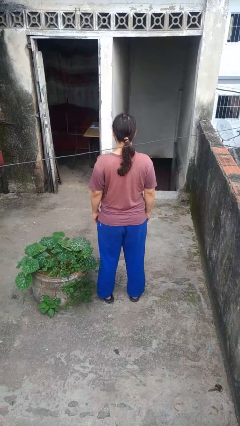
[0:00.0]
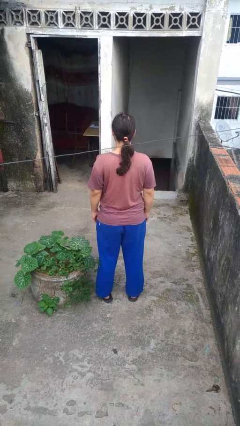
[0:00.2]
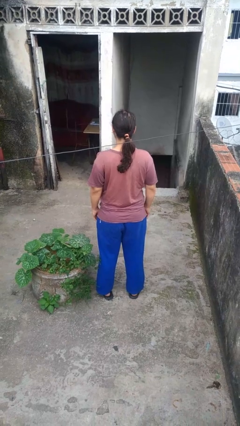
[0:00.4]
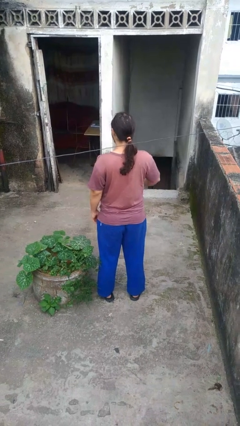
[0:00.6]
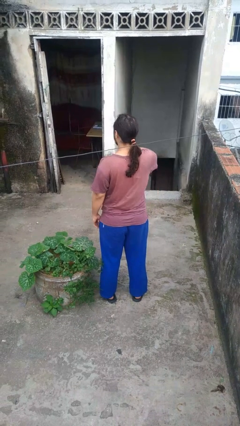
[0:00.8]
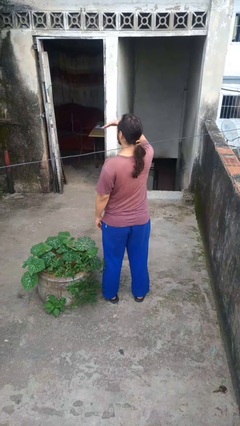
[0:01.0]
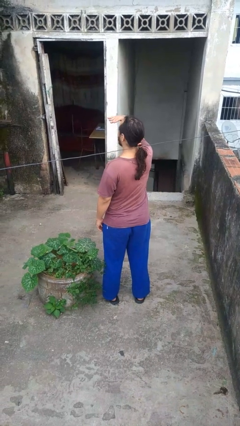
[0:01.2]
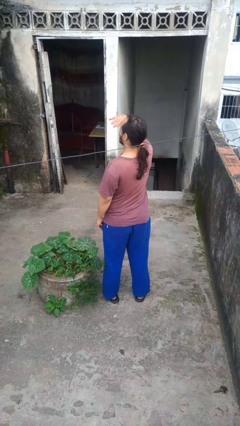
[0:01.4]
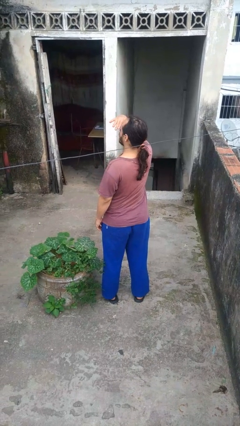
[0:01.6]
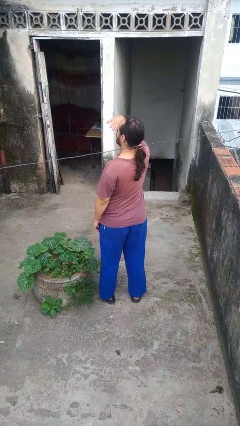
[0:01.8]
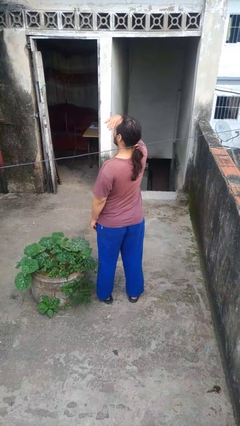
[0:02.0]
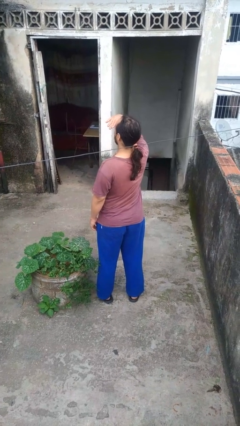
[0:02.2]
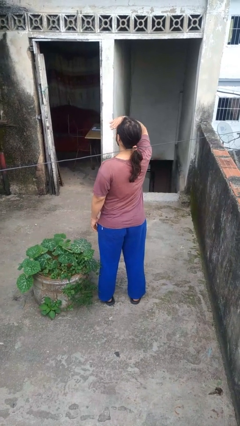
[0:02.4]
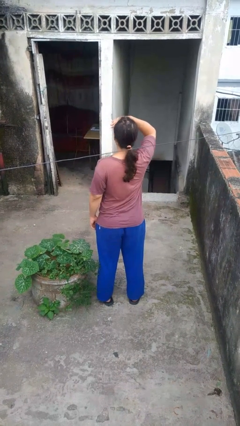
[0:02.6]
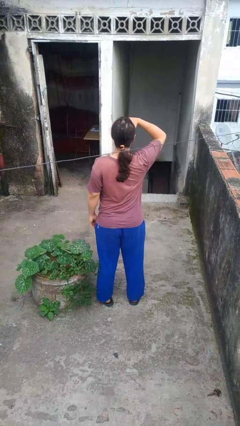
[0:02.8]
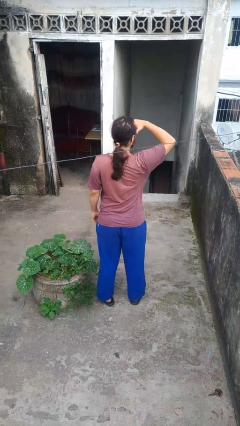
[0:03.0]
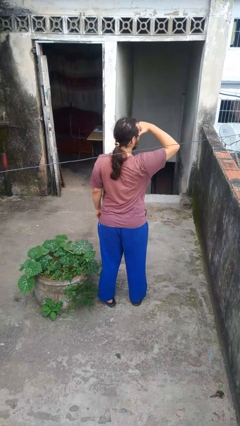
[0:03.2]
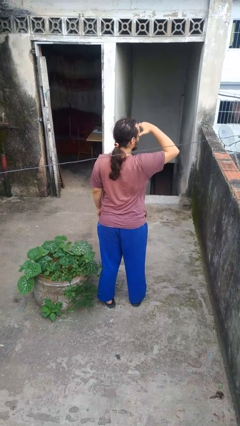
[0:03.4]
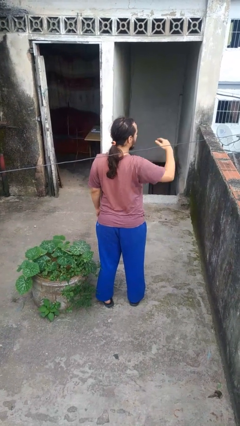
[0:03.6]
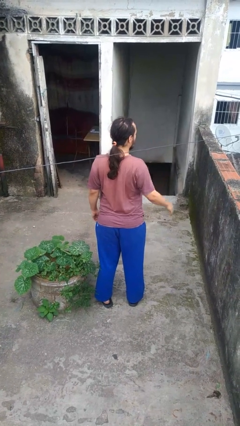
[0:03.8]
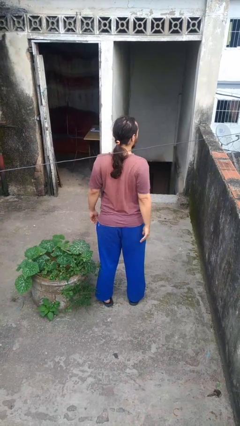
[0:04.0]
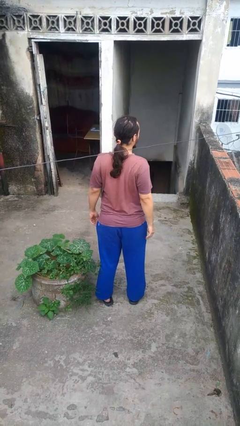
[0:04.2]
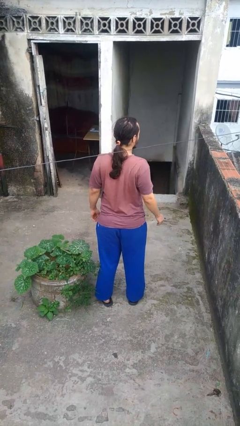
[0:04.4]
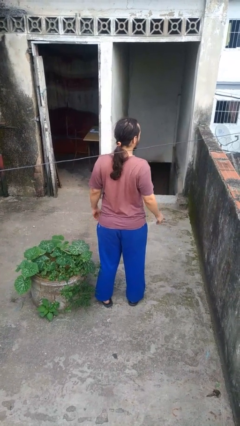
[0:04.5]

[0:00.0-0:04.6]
person shades eyes

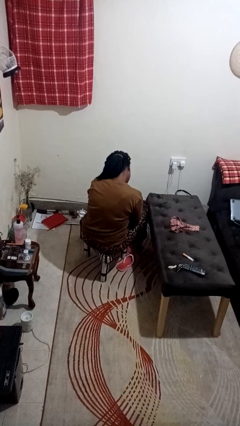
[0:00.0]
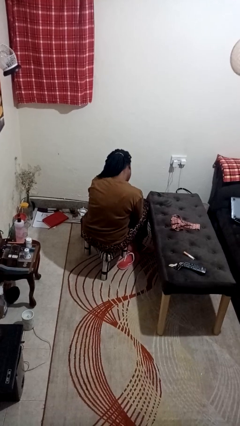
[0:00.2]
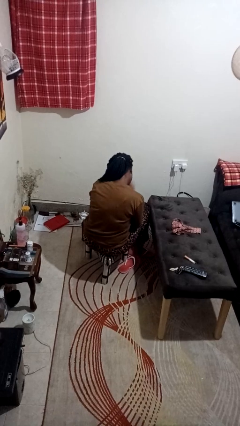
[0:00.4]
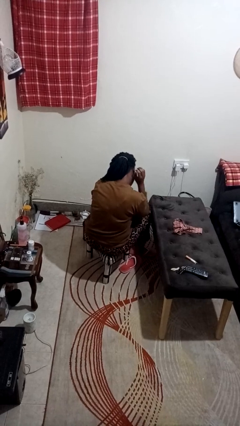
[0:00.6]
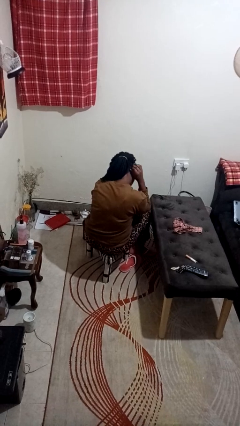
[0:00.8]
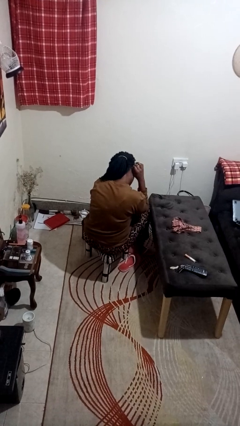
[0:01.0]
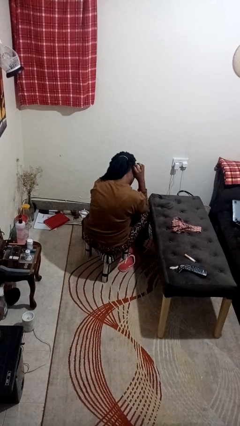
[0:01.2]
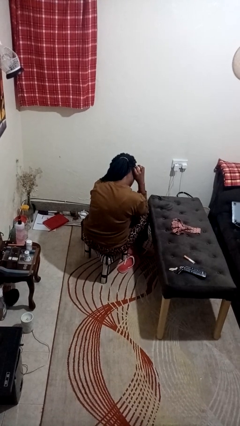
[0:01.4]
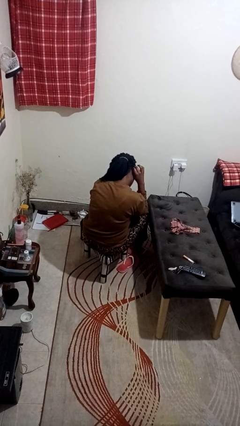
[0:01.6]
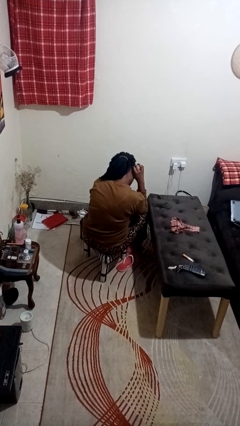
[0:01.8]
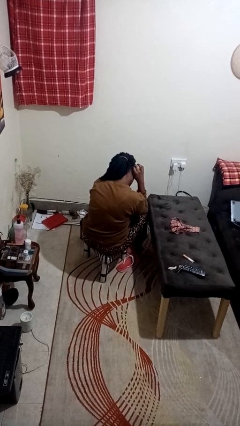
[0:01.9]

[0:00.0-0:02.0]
person gestures listen closely

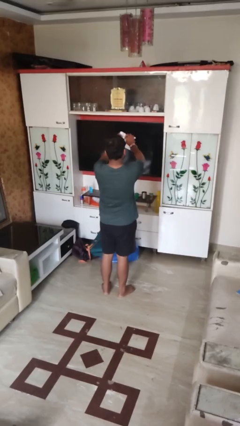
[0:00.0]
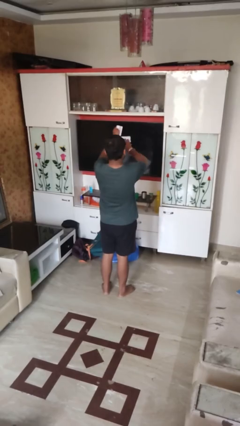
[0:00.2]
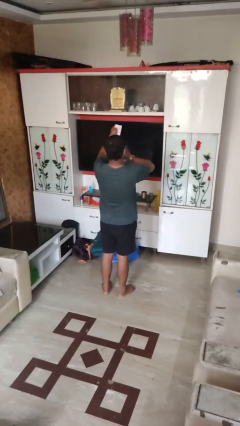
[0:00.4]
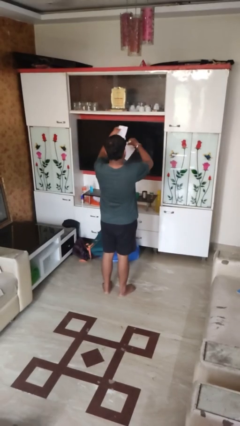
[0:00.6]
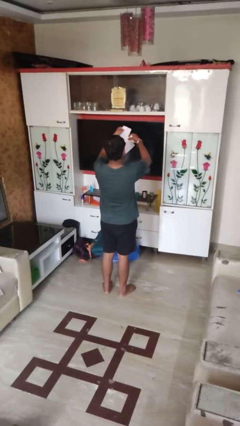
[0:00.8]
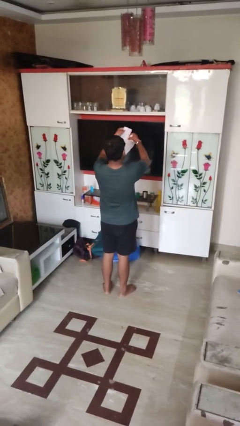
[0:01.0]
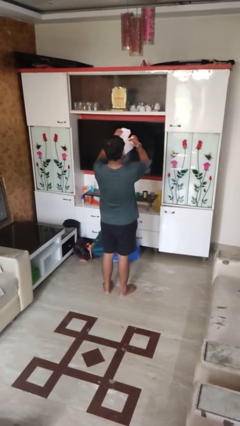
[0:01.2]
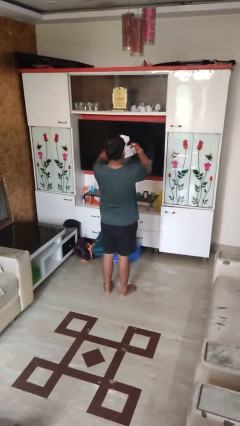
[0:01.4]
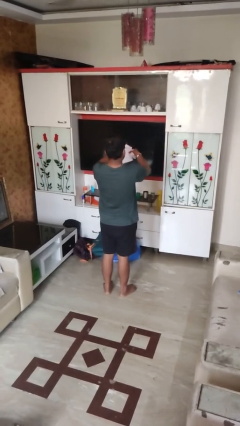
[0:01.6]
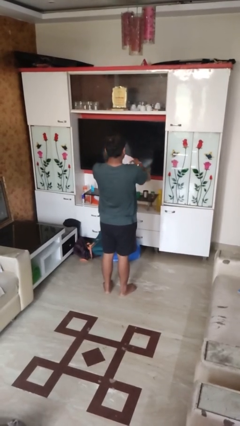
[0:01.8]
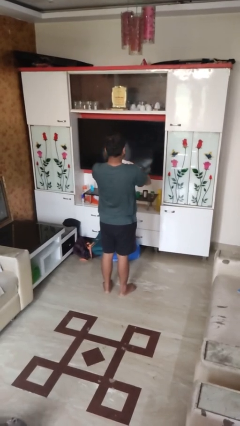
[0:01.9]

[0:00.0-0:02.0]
person tears paper

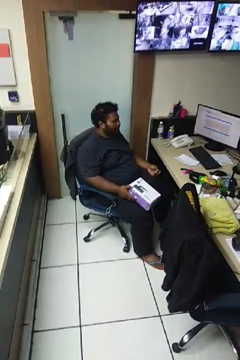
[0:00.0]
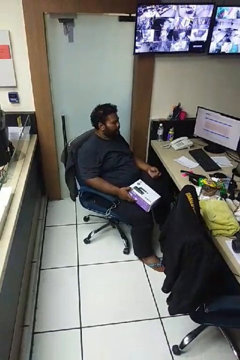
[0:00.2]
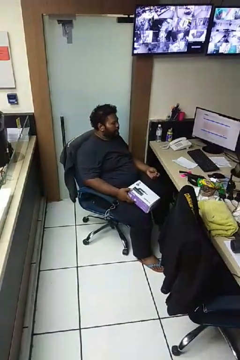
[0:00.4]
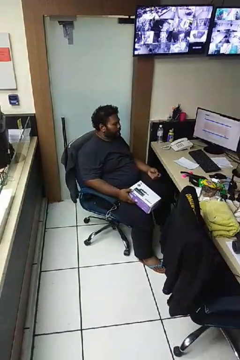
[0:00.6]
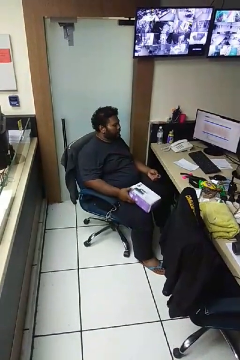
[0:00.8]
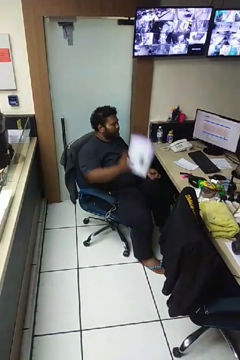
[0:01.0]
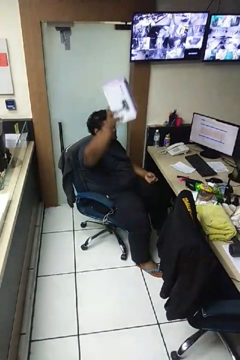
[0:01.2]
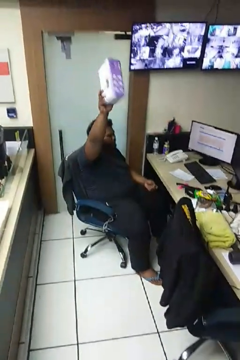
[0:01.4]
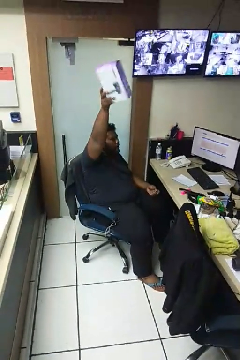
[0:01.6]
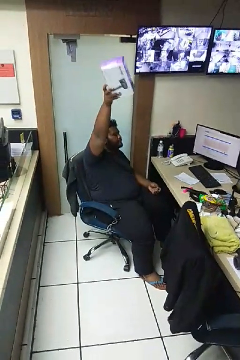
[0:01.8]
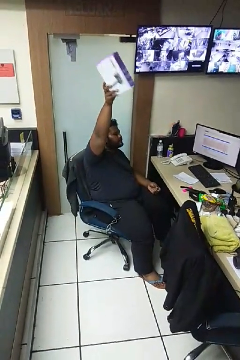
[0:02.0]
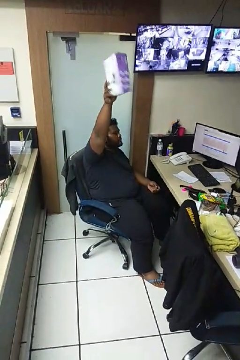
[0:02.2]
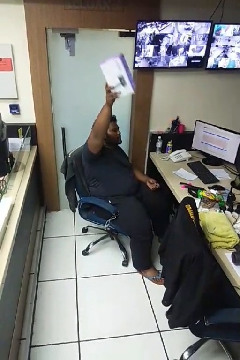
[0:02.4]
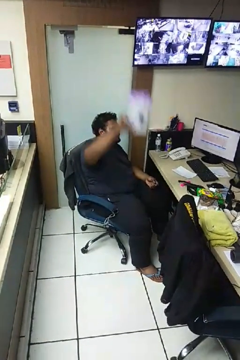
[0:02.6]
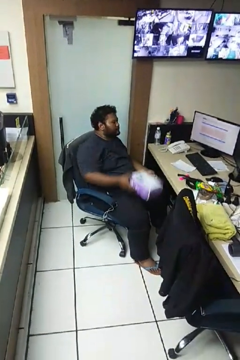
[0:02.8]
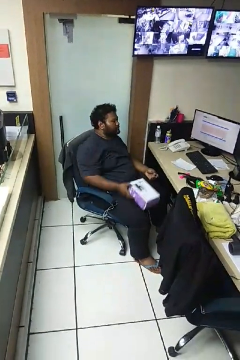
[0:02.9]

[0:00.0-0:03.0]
person holds object above head

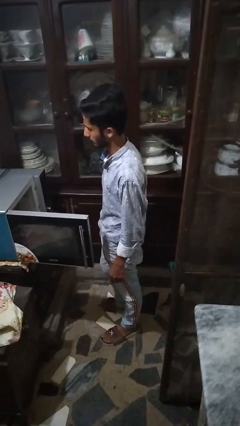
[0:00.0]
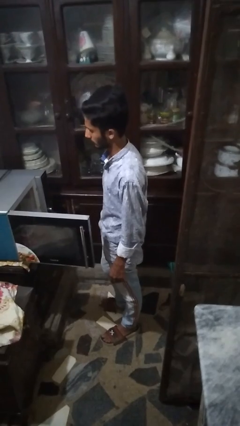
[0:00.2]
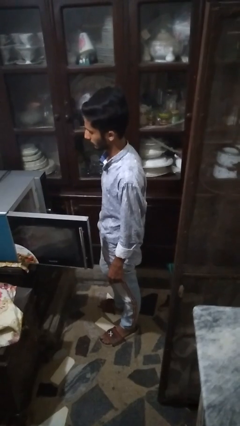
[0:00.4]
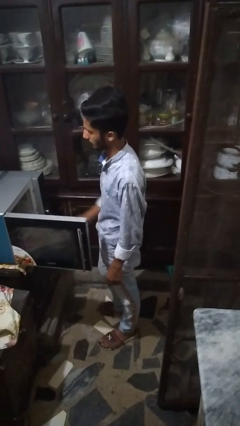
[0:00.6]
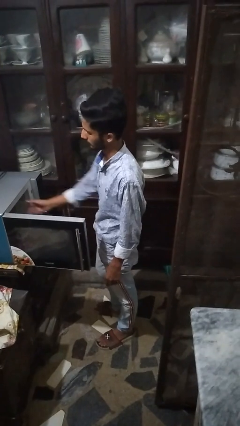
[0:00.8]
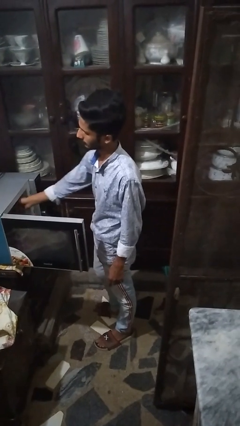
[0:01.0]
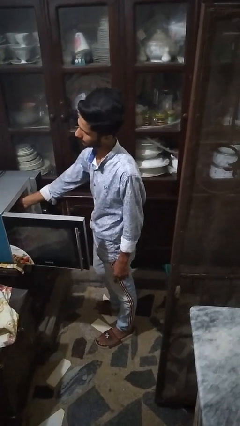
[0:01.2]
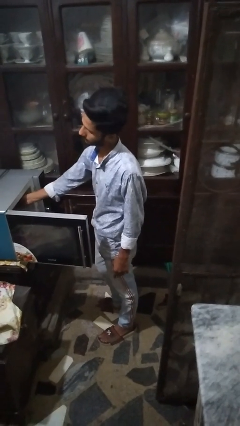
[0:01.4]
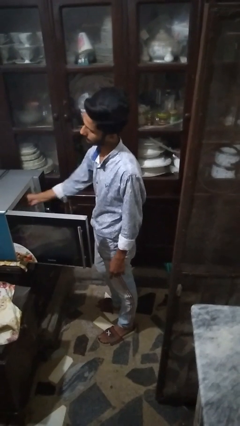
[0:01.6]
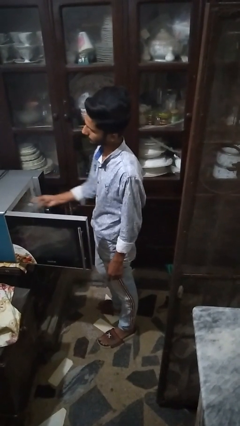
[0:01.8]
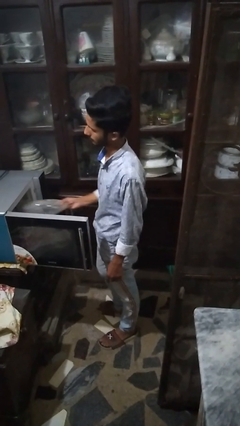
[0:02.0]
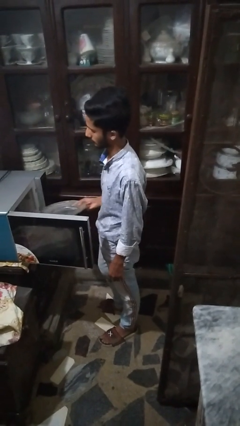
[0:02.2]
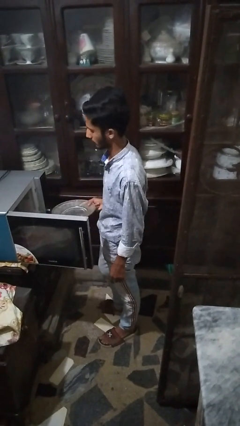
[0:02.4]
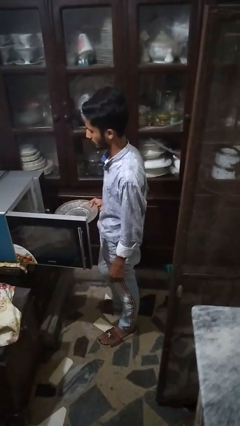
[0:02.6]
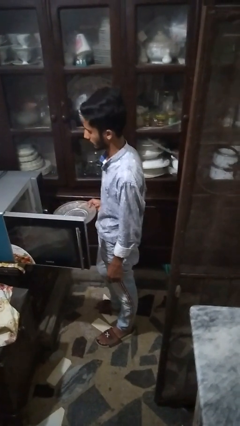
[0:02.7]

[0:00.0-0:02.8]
person takes object from microwave

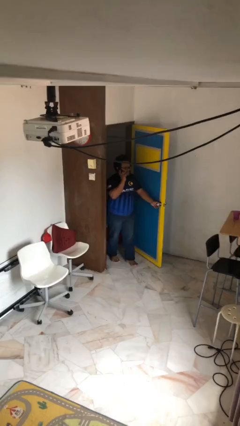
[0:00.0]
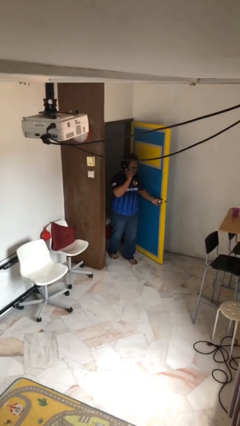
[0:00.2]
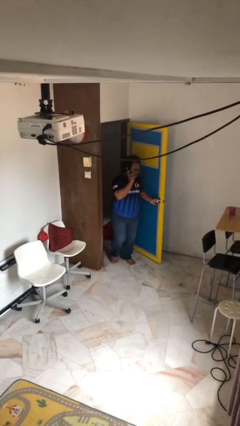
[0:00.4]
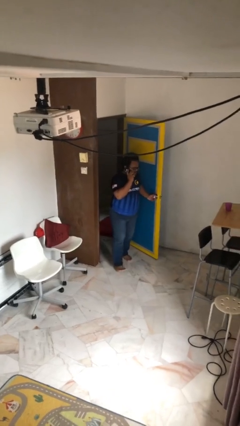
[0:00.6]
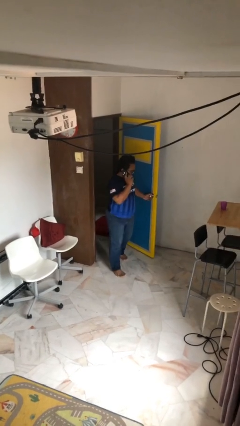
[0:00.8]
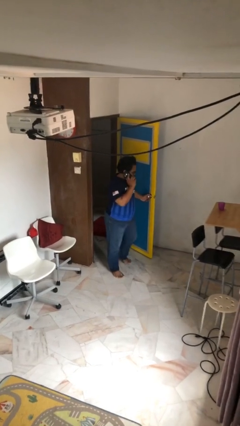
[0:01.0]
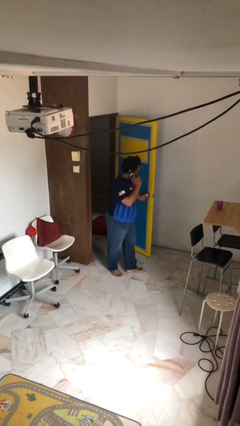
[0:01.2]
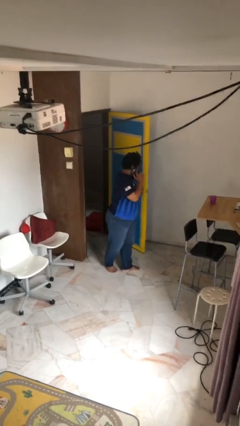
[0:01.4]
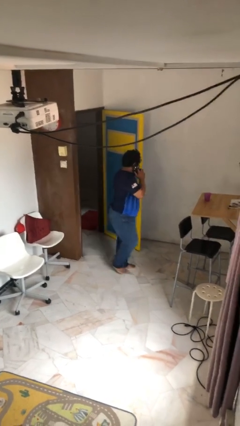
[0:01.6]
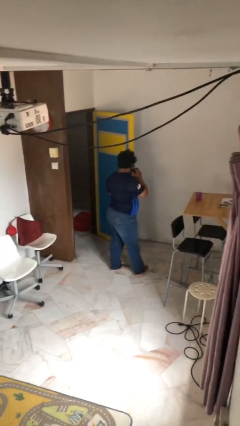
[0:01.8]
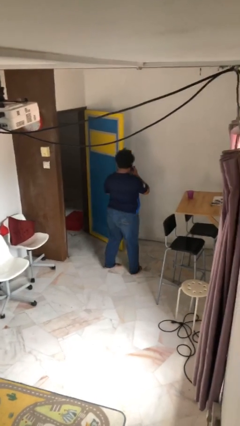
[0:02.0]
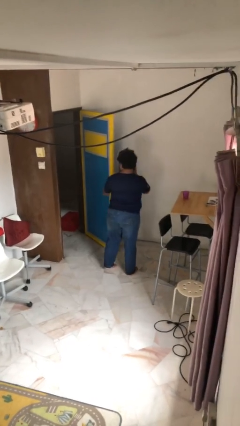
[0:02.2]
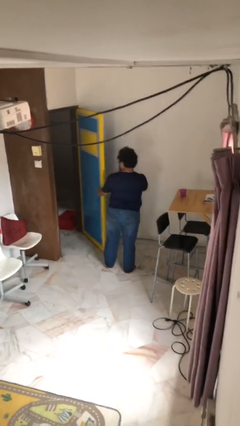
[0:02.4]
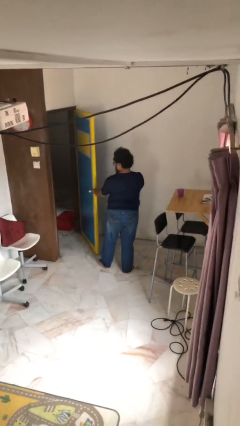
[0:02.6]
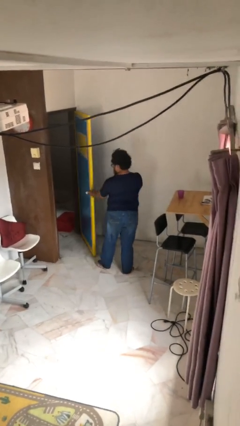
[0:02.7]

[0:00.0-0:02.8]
person enters scene through structure

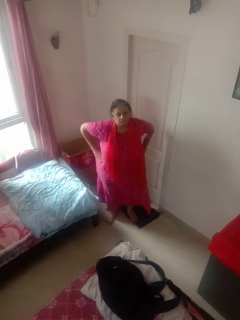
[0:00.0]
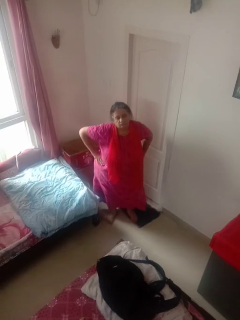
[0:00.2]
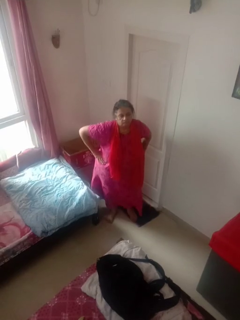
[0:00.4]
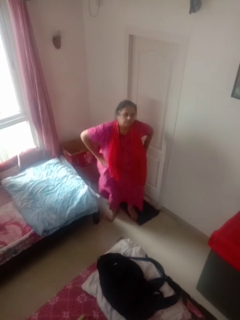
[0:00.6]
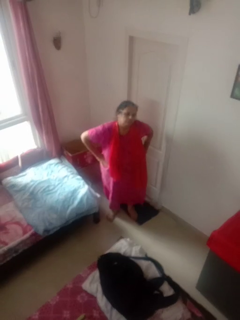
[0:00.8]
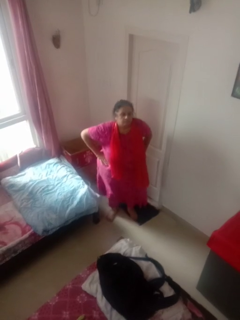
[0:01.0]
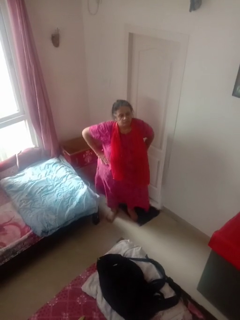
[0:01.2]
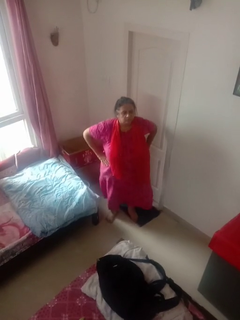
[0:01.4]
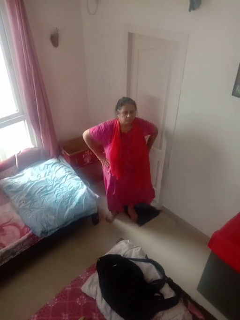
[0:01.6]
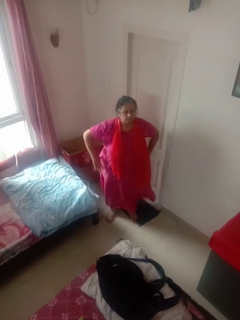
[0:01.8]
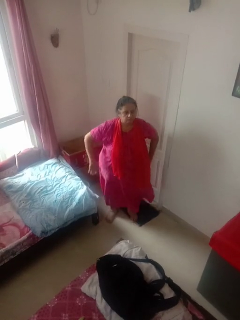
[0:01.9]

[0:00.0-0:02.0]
person wiggles hips
